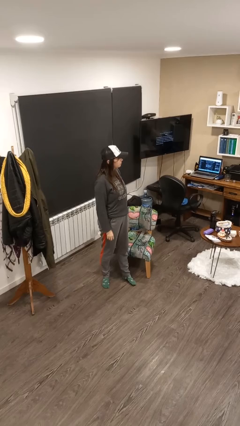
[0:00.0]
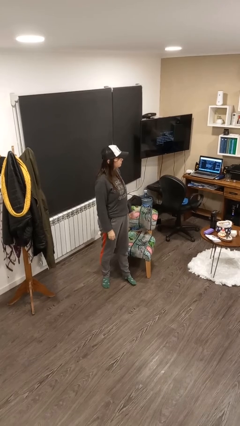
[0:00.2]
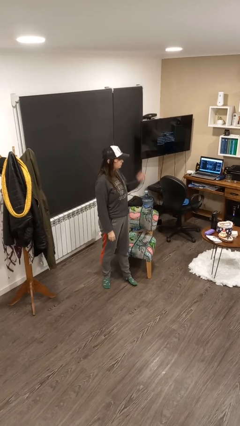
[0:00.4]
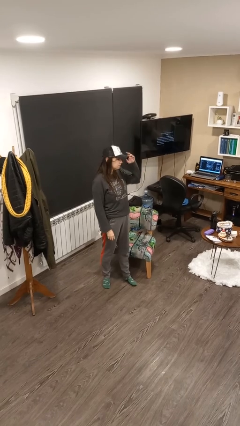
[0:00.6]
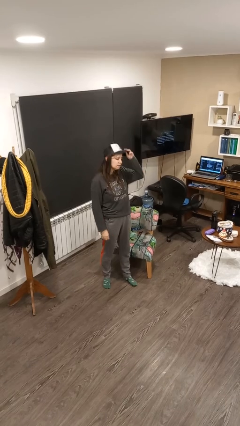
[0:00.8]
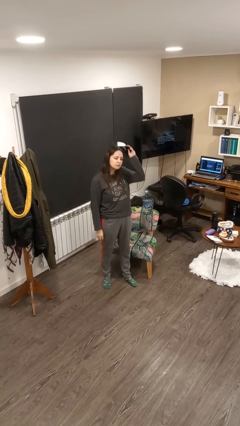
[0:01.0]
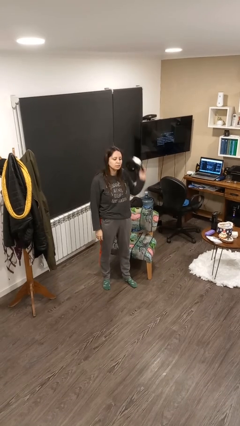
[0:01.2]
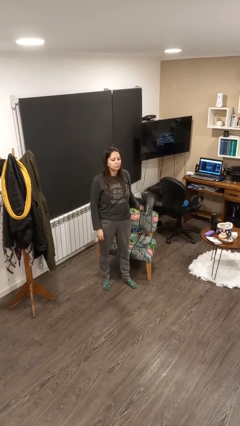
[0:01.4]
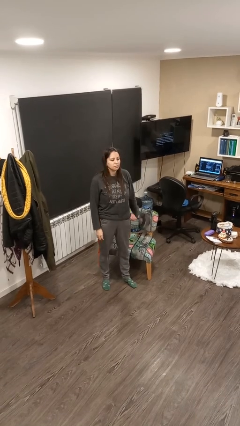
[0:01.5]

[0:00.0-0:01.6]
person takes off hat

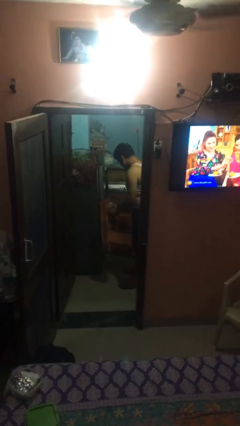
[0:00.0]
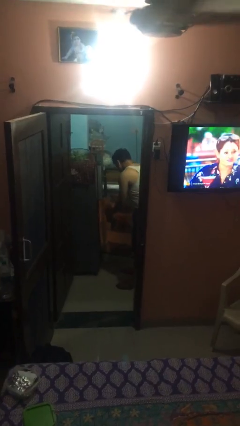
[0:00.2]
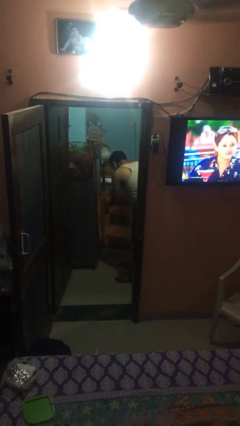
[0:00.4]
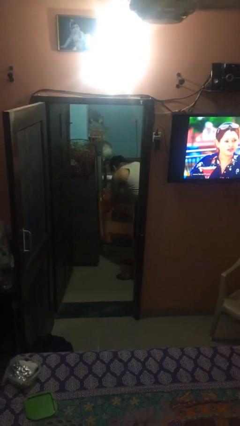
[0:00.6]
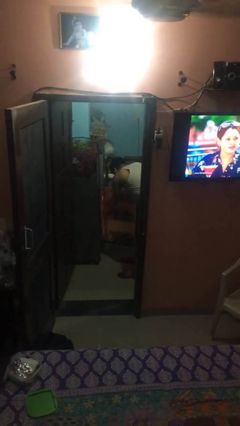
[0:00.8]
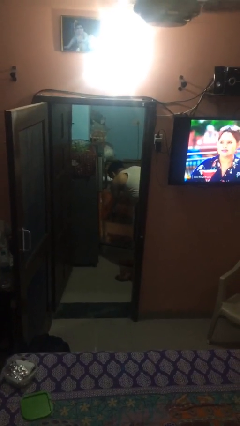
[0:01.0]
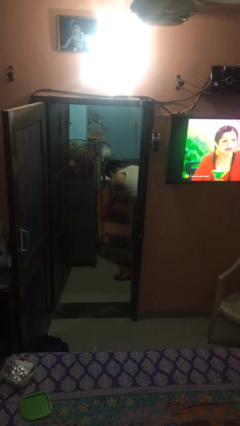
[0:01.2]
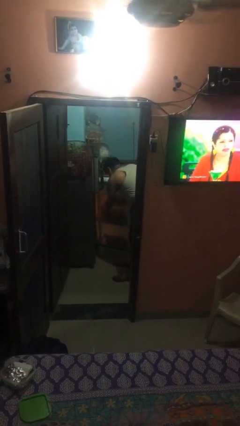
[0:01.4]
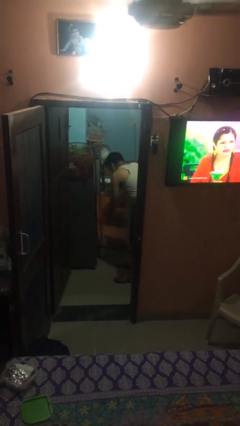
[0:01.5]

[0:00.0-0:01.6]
person puts object into refrigerator

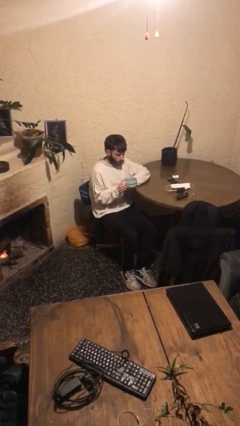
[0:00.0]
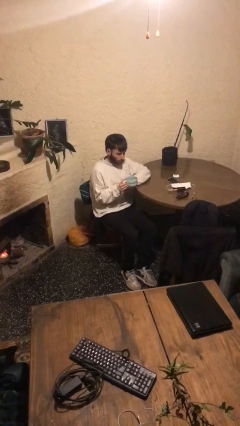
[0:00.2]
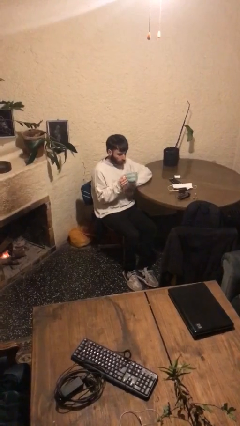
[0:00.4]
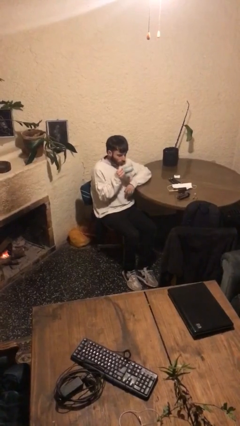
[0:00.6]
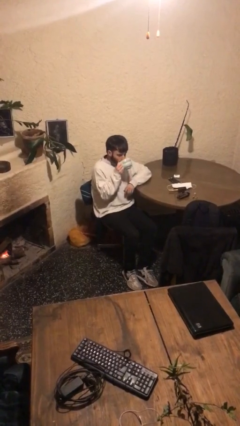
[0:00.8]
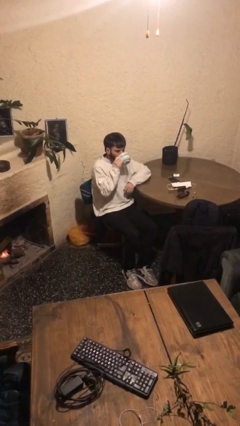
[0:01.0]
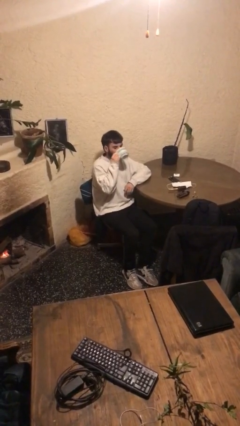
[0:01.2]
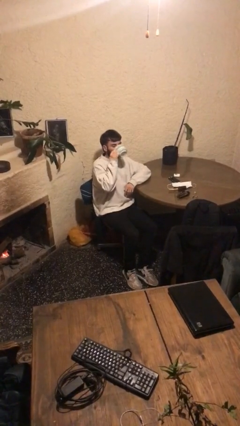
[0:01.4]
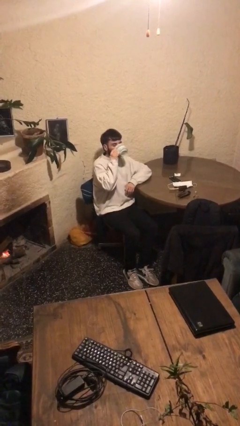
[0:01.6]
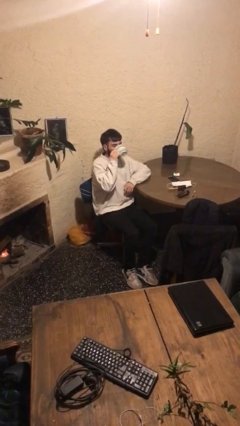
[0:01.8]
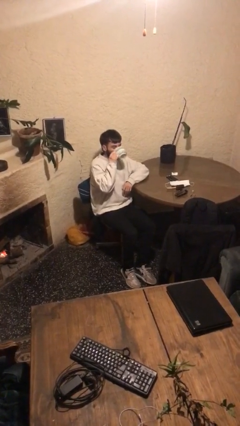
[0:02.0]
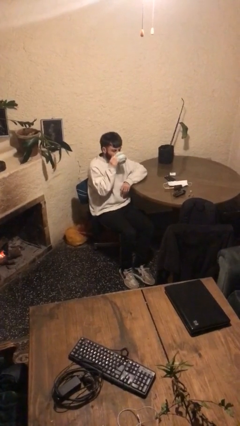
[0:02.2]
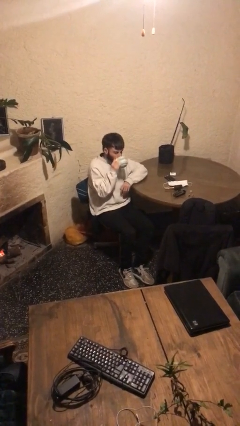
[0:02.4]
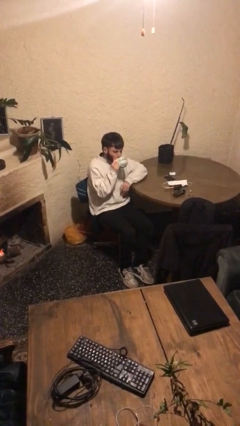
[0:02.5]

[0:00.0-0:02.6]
person drinks from mug

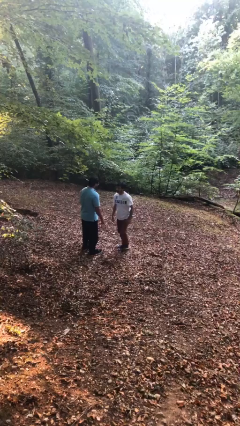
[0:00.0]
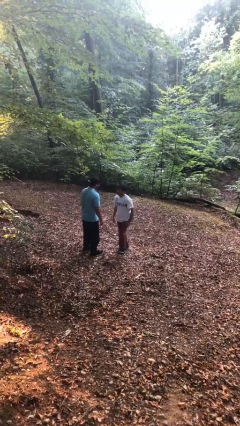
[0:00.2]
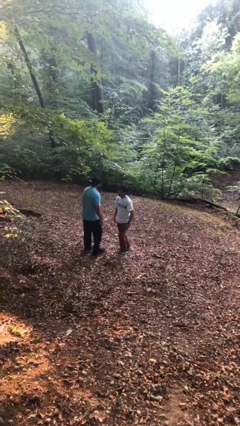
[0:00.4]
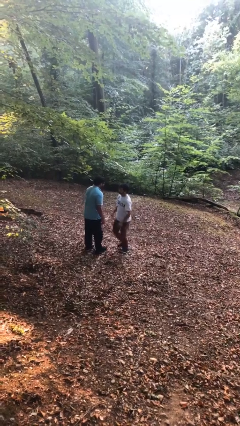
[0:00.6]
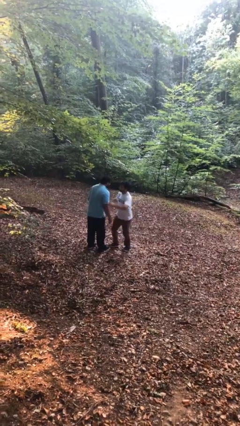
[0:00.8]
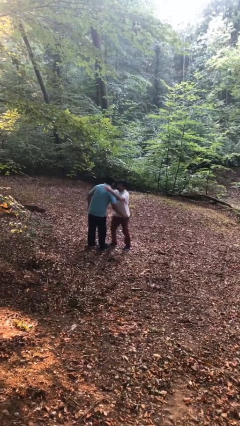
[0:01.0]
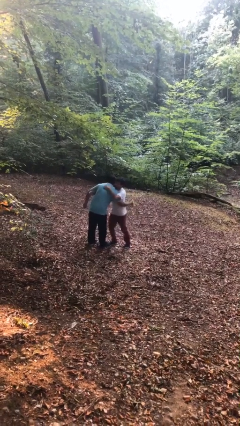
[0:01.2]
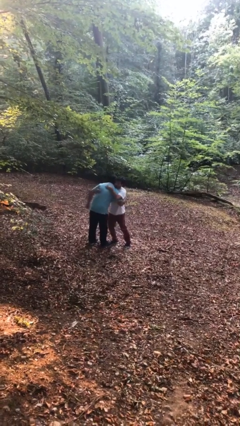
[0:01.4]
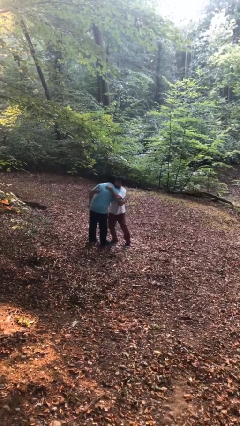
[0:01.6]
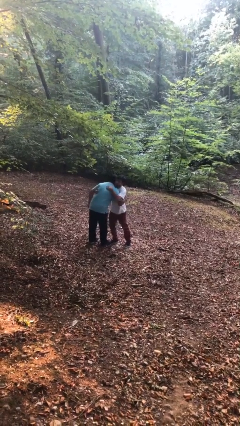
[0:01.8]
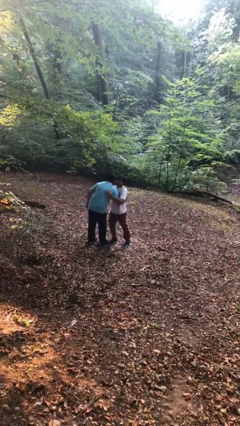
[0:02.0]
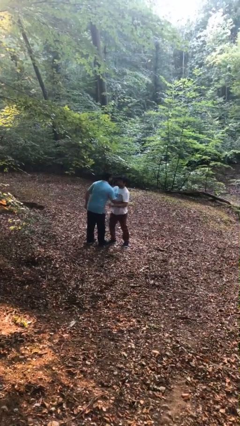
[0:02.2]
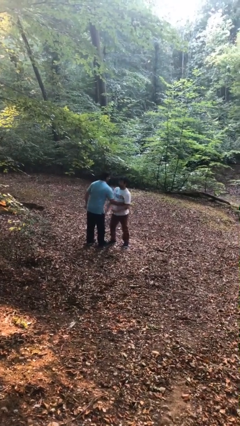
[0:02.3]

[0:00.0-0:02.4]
person embraces person

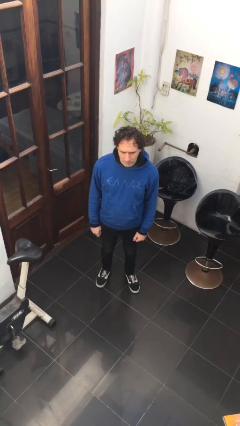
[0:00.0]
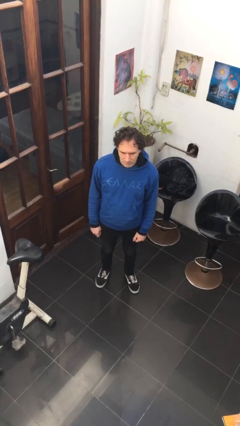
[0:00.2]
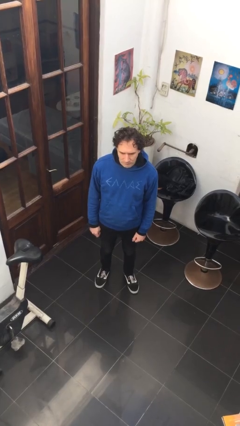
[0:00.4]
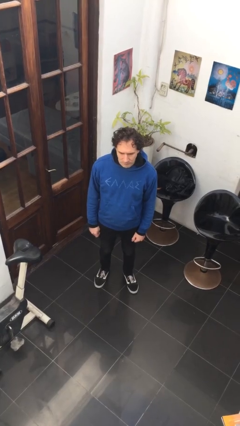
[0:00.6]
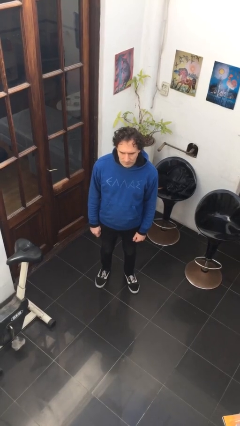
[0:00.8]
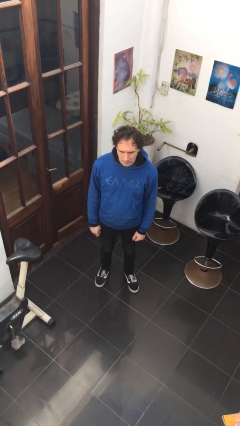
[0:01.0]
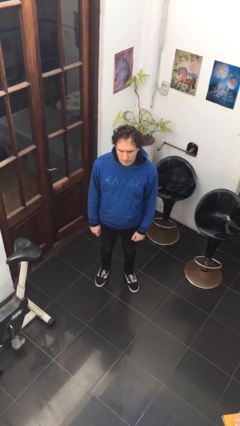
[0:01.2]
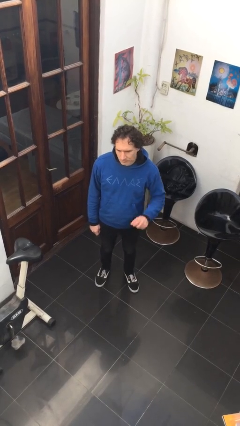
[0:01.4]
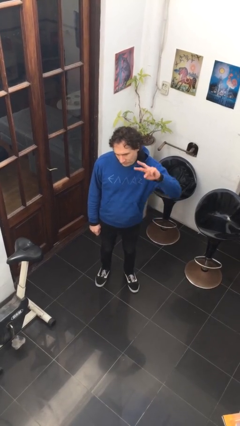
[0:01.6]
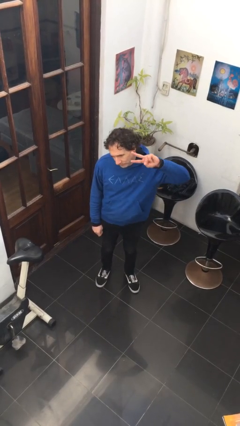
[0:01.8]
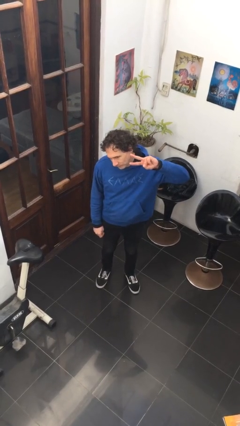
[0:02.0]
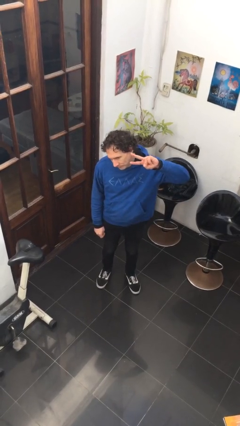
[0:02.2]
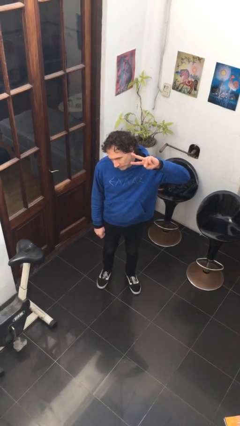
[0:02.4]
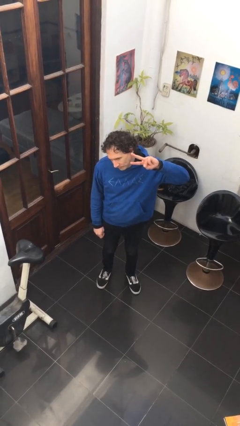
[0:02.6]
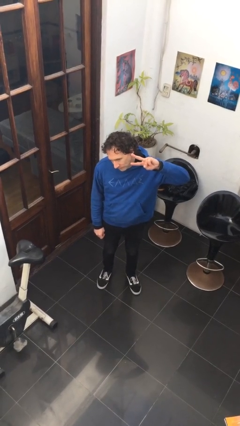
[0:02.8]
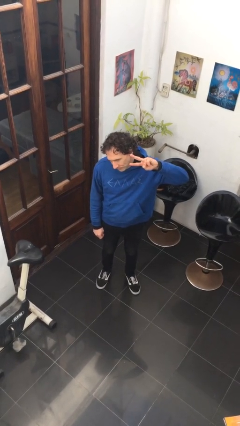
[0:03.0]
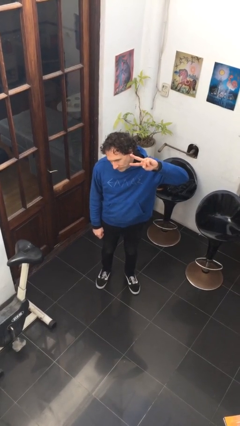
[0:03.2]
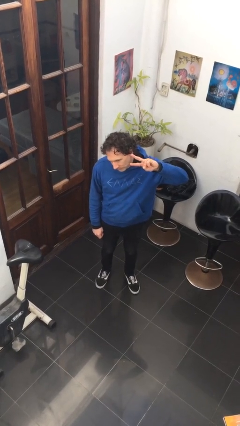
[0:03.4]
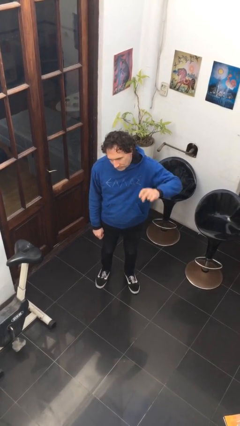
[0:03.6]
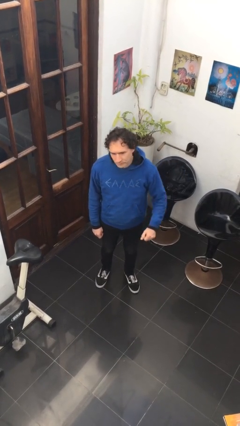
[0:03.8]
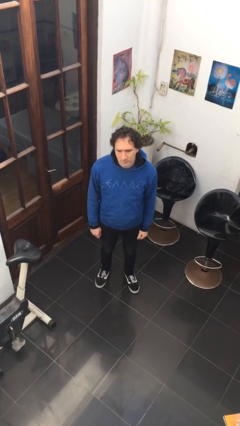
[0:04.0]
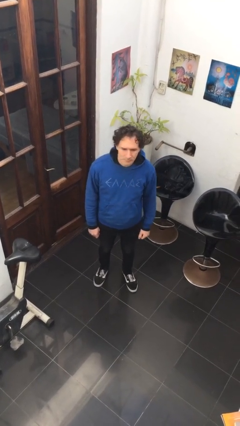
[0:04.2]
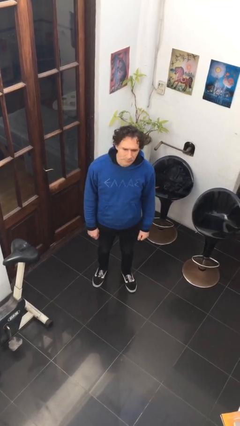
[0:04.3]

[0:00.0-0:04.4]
person gestures peace

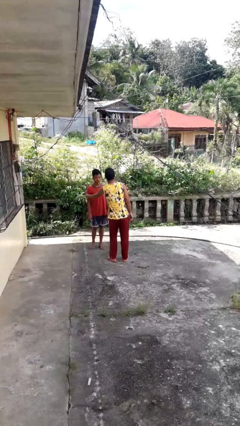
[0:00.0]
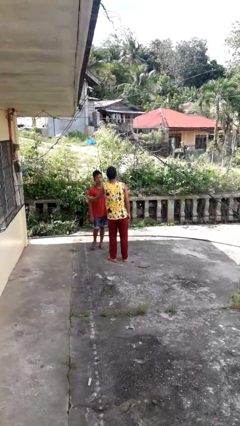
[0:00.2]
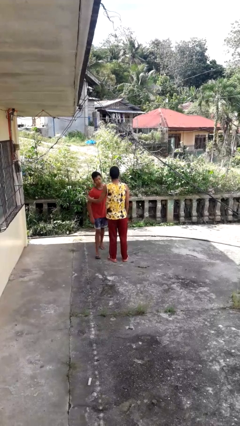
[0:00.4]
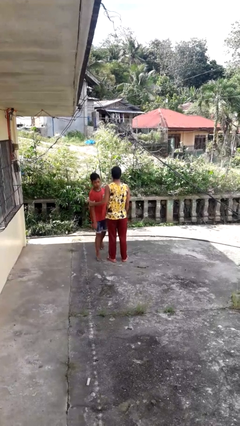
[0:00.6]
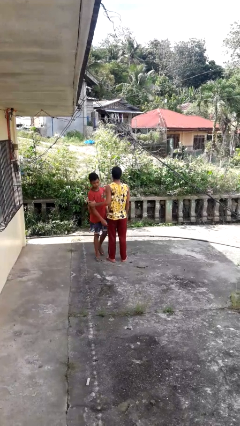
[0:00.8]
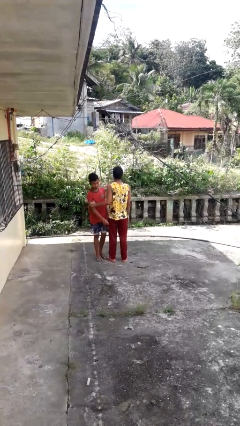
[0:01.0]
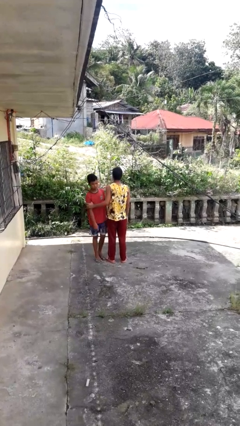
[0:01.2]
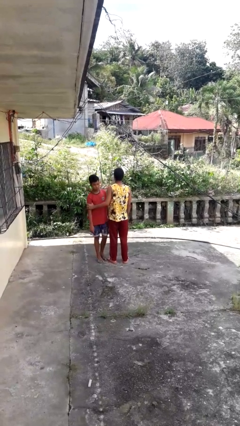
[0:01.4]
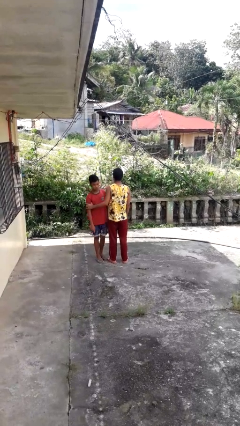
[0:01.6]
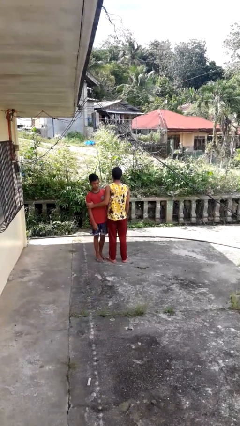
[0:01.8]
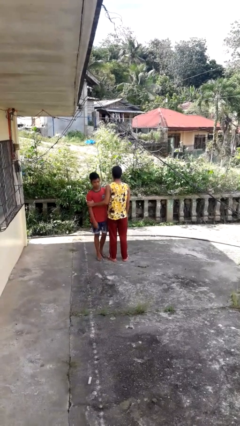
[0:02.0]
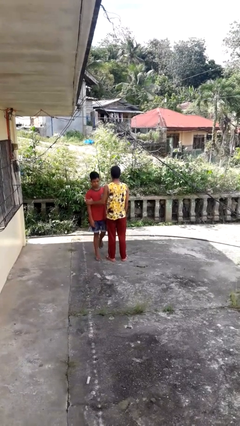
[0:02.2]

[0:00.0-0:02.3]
person grabs person by bicep

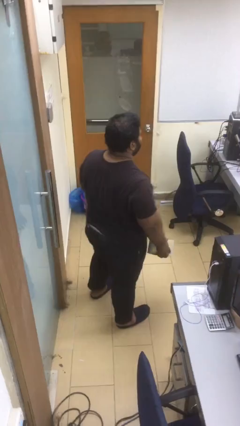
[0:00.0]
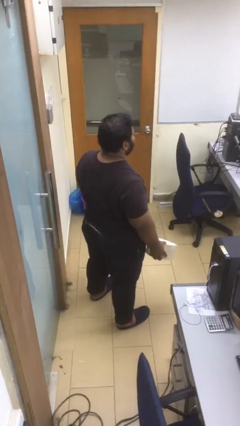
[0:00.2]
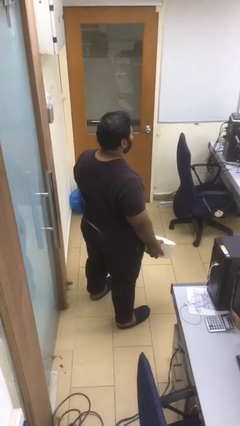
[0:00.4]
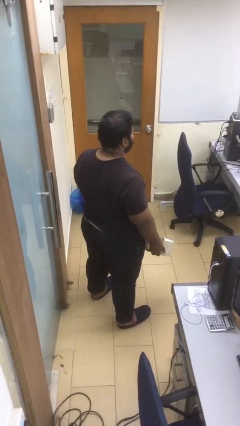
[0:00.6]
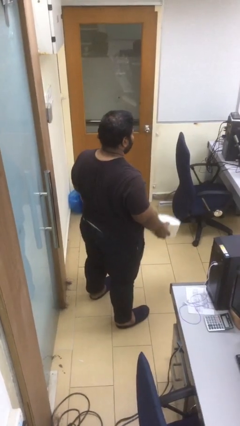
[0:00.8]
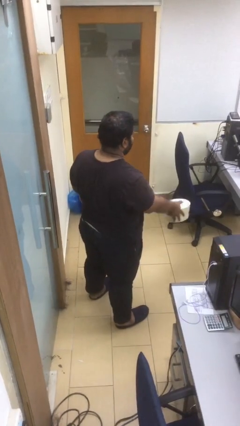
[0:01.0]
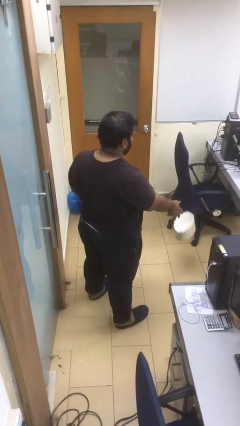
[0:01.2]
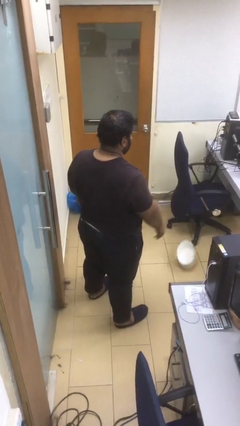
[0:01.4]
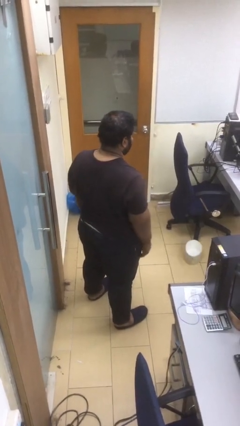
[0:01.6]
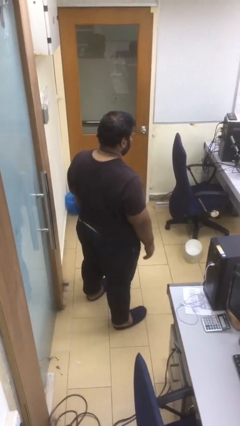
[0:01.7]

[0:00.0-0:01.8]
person throws object to ground

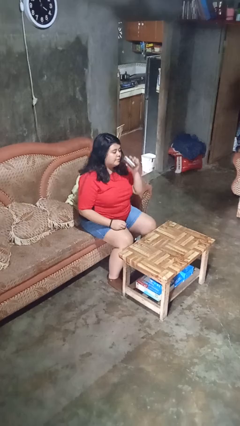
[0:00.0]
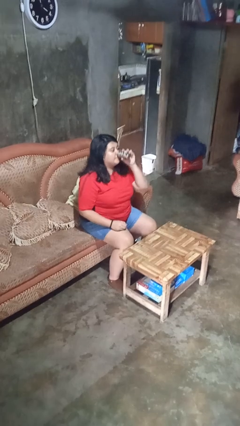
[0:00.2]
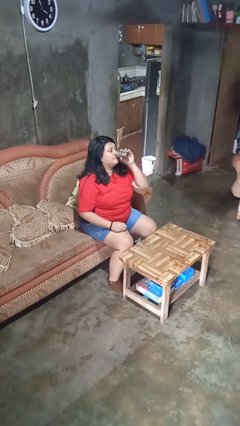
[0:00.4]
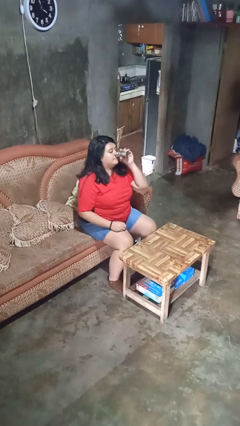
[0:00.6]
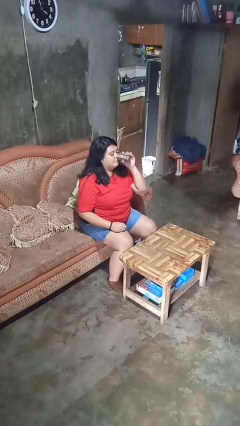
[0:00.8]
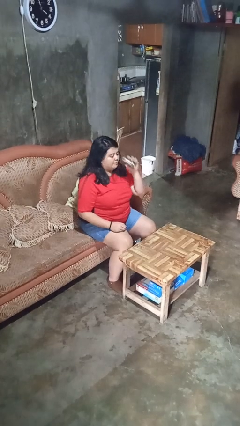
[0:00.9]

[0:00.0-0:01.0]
person drinks from beverage can
